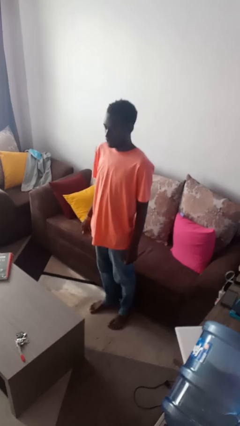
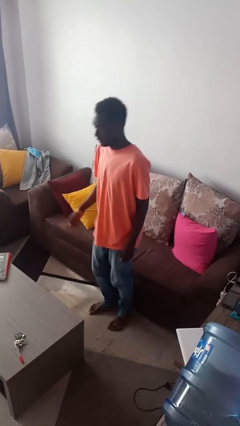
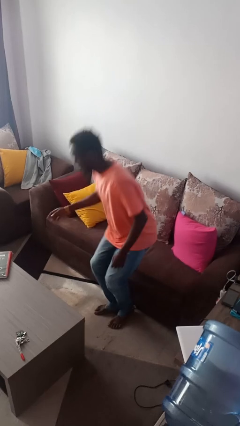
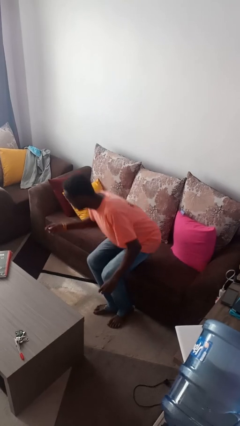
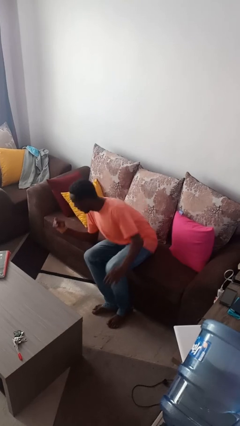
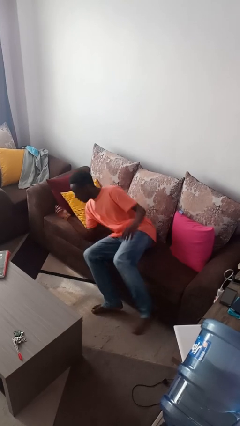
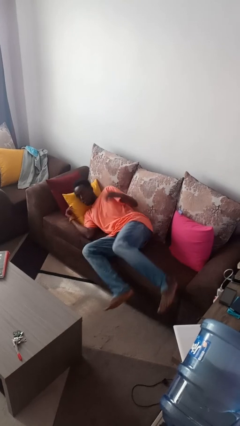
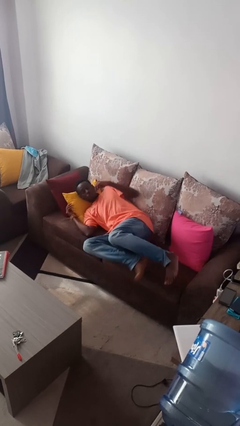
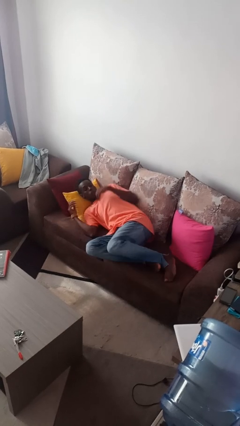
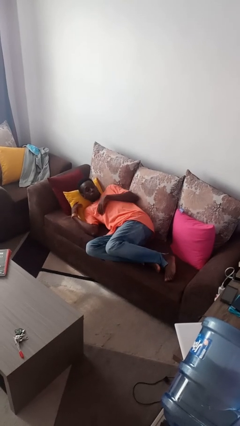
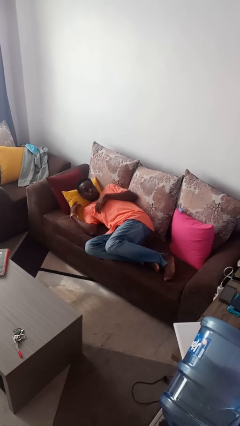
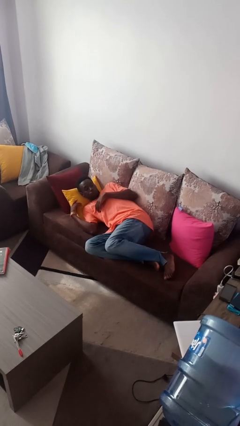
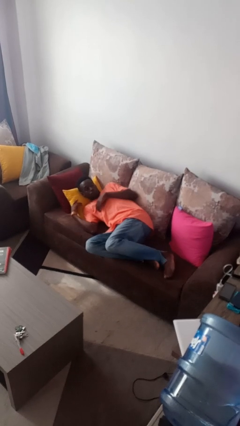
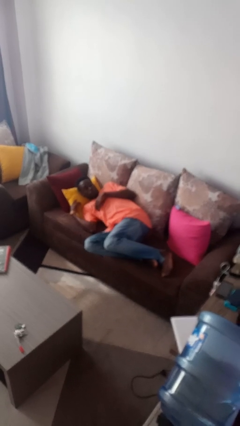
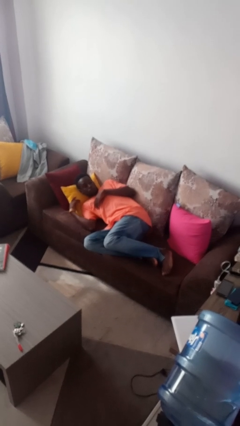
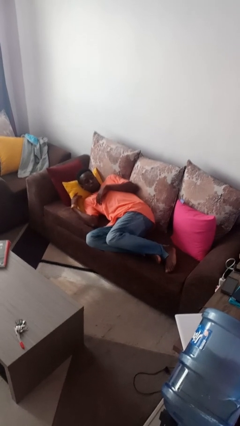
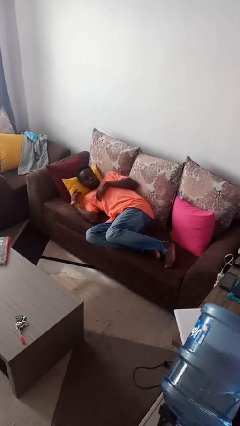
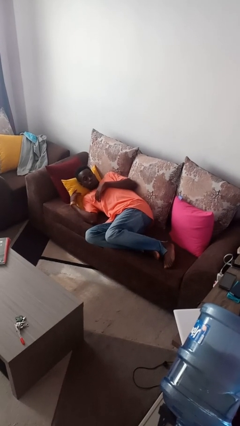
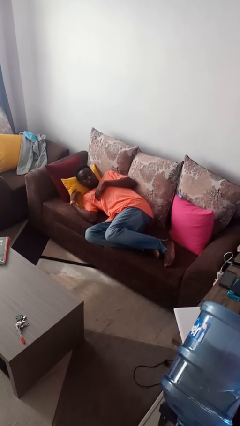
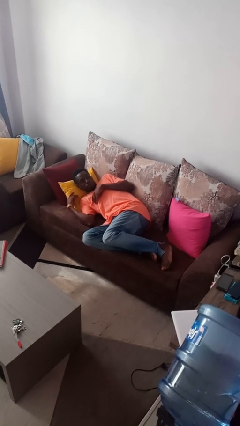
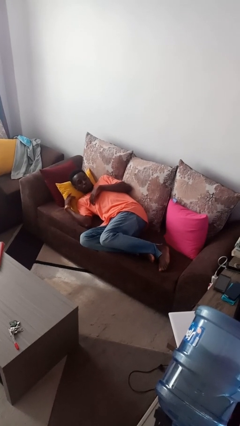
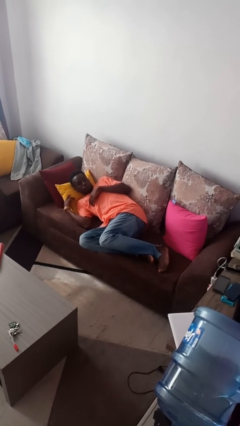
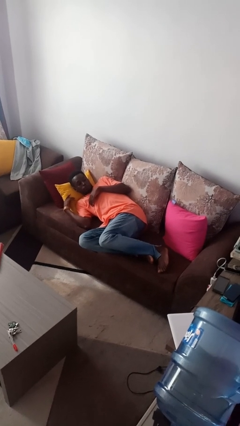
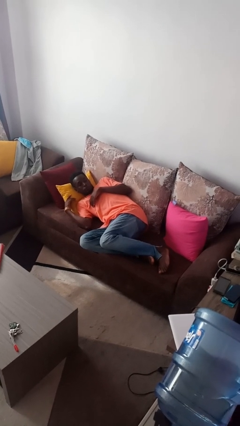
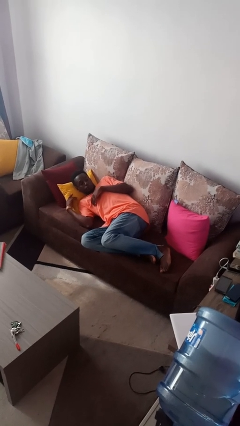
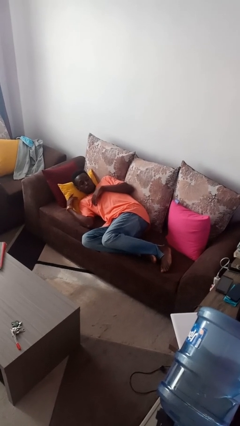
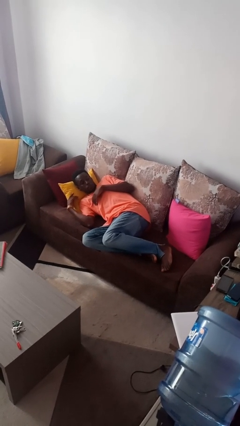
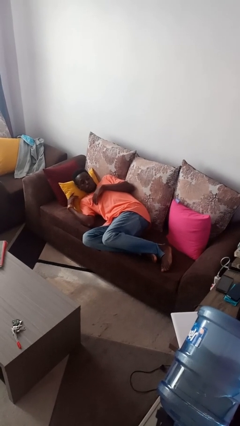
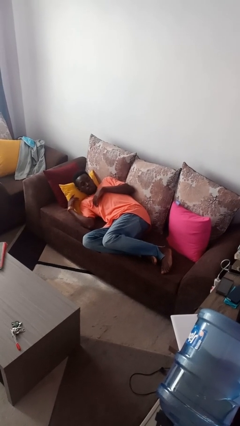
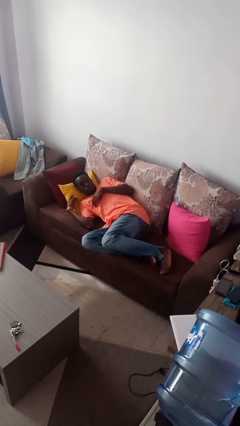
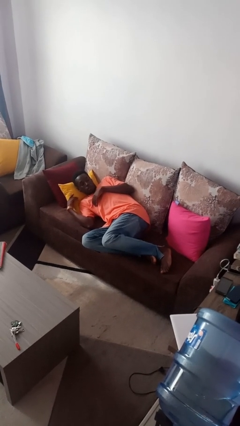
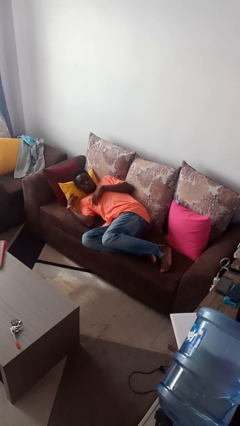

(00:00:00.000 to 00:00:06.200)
person lies down on couch

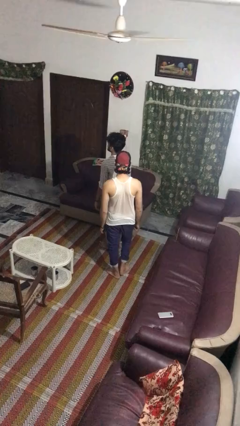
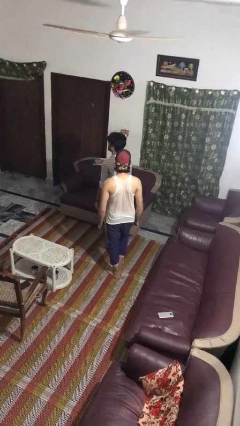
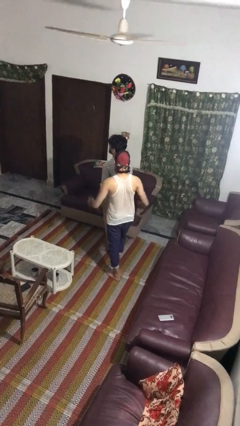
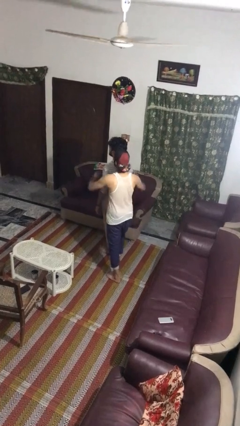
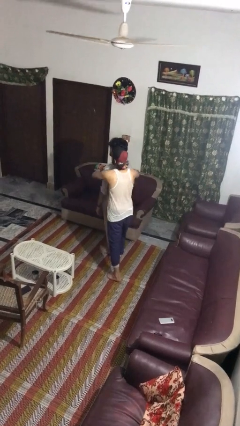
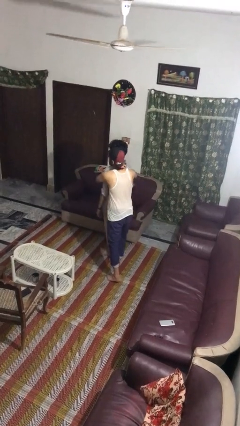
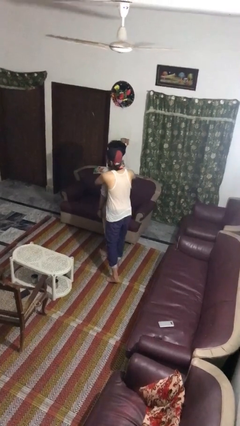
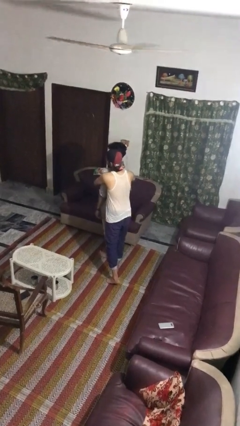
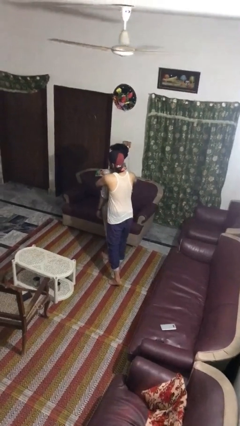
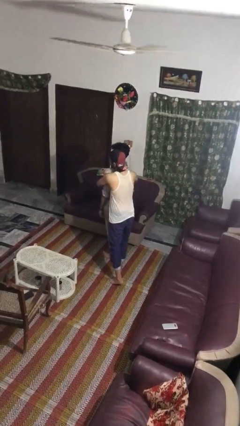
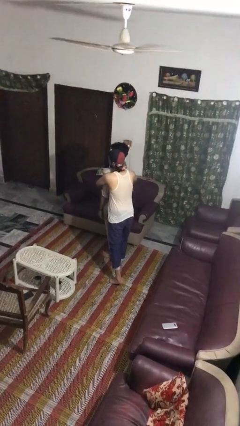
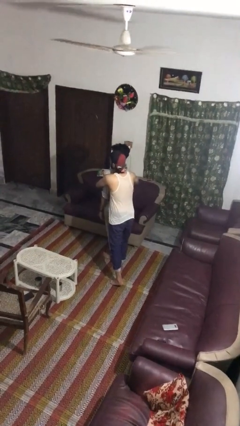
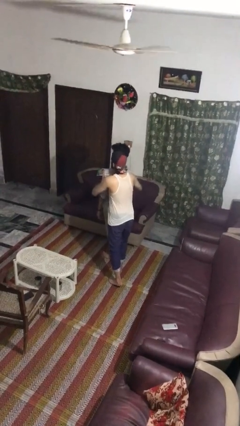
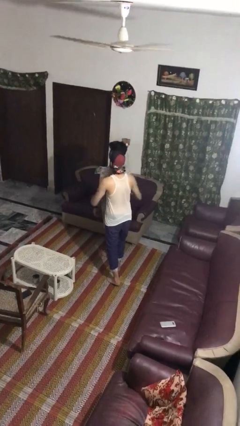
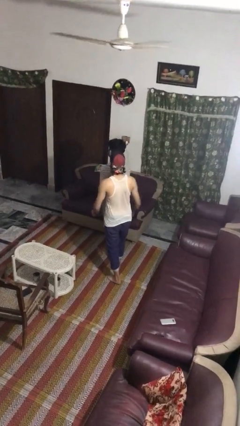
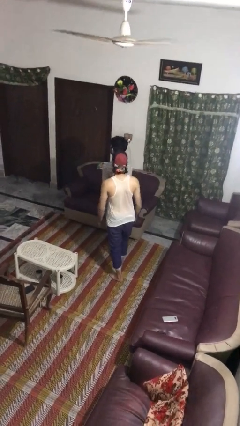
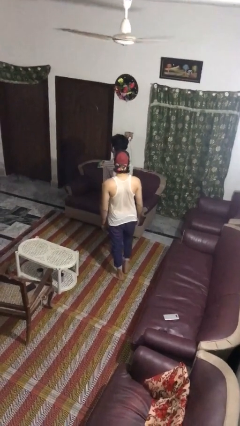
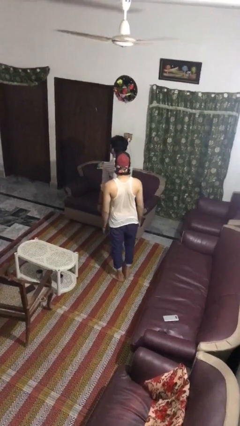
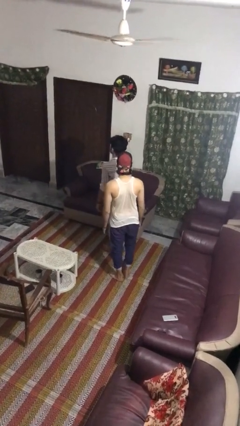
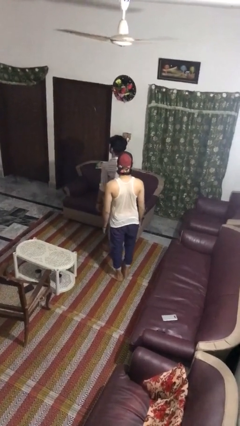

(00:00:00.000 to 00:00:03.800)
person hugs person from behind

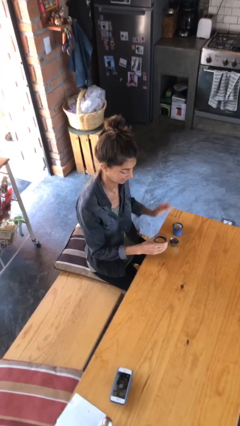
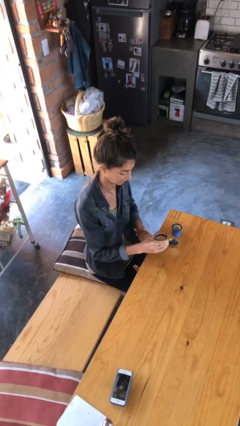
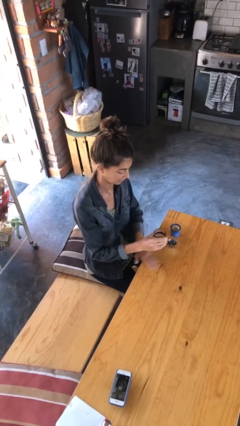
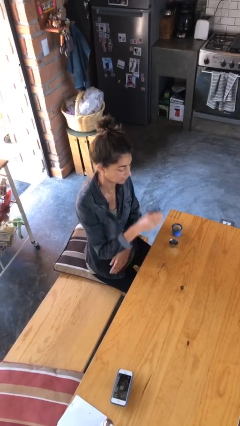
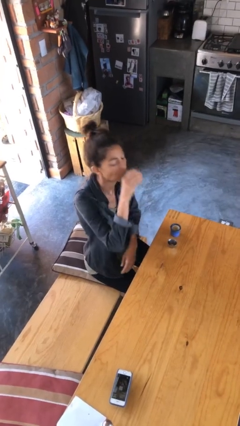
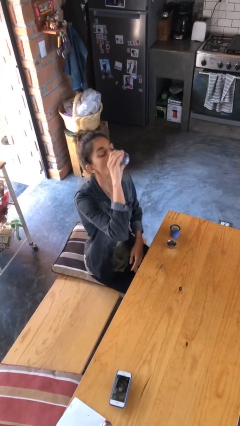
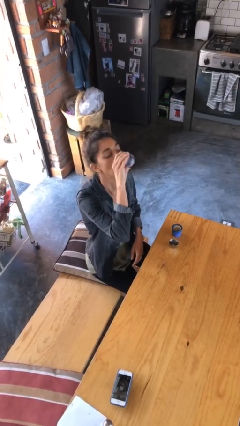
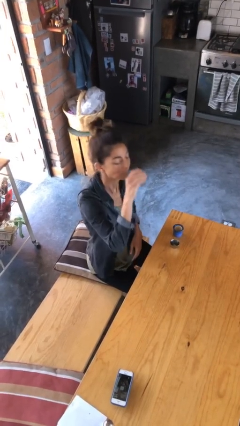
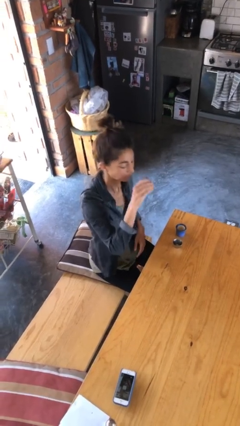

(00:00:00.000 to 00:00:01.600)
person drinks from shotglass

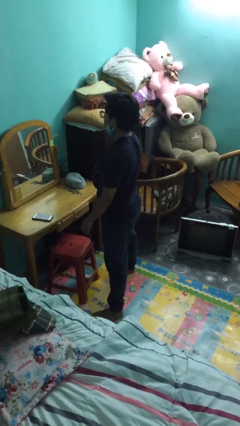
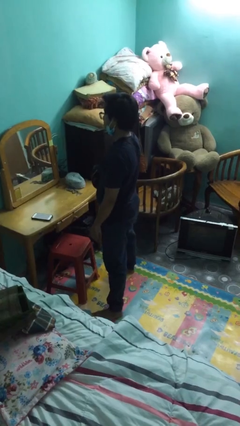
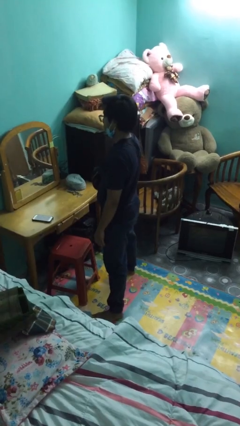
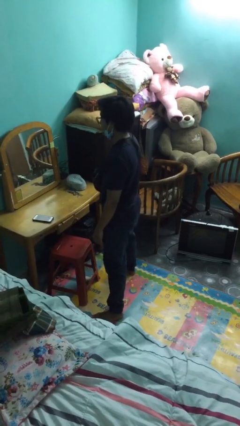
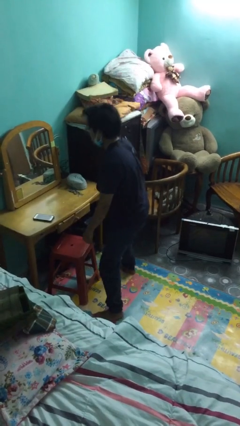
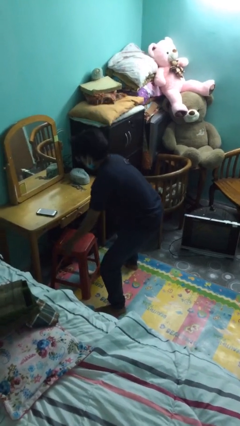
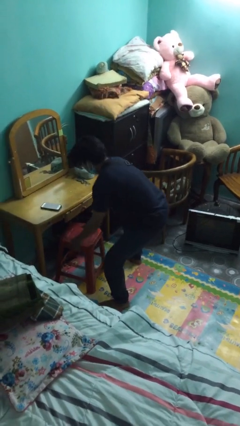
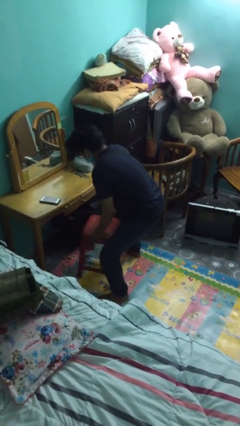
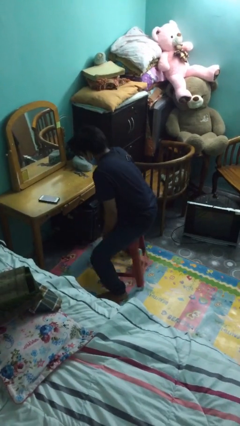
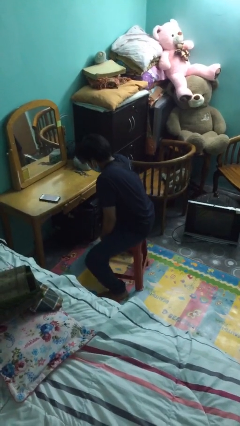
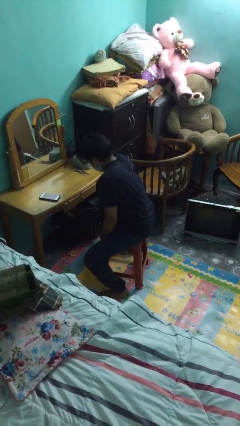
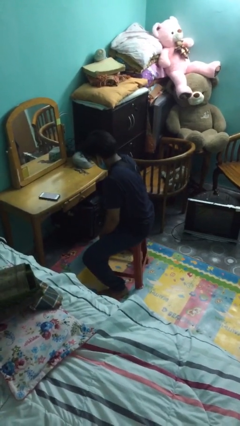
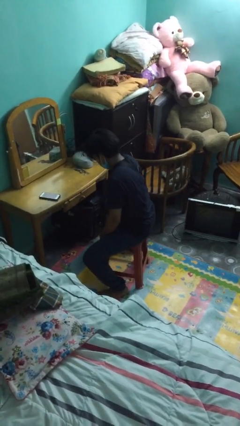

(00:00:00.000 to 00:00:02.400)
person sits down

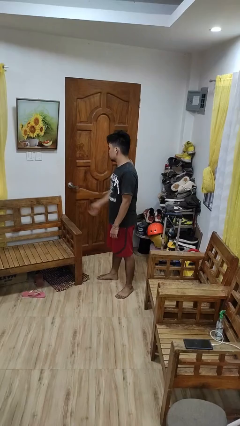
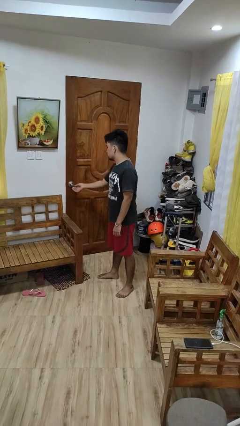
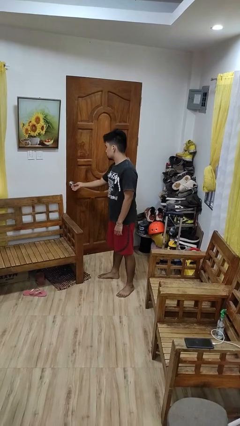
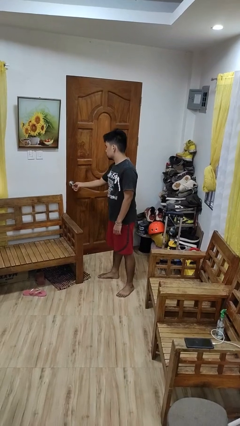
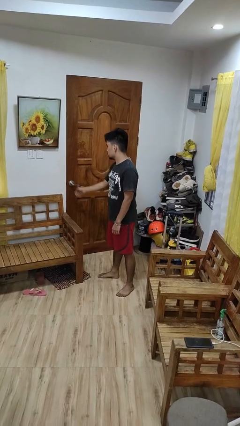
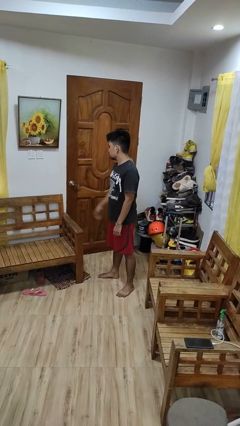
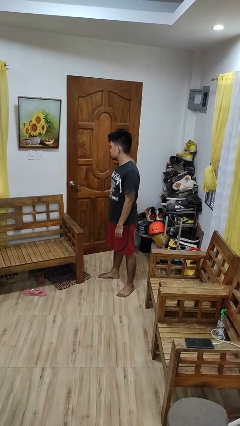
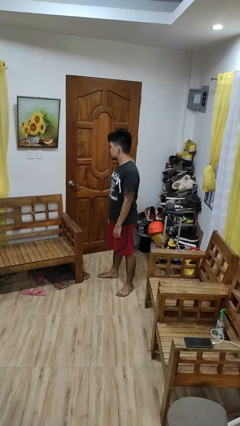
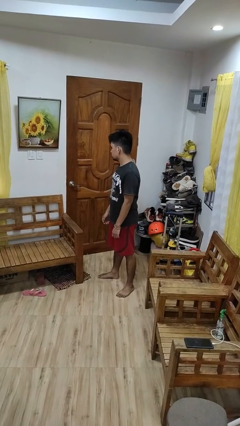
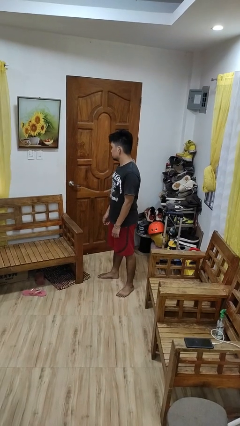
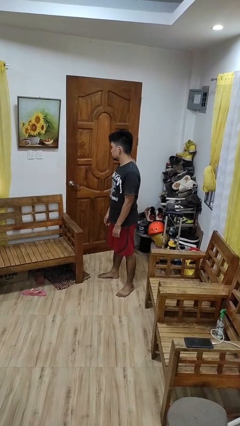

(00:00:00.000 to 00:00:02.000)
person locks door with keys

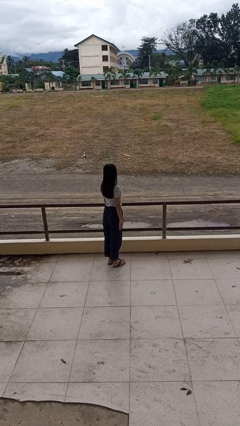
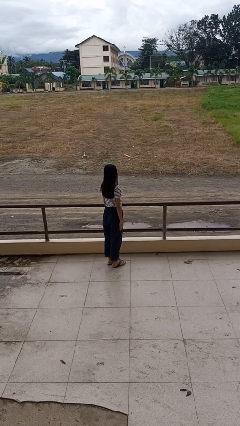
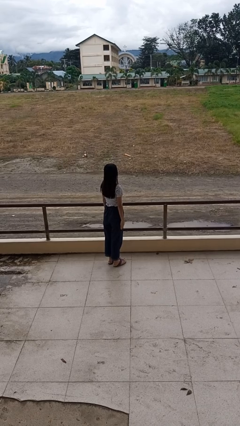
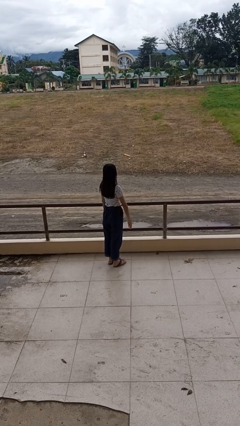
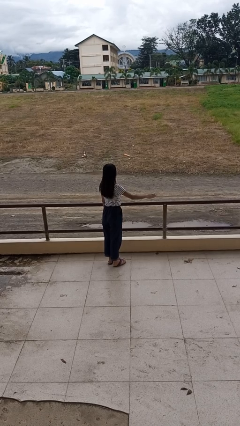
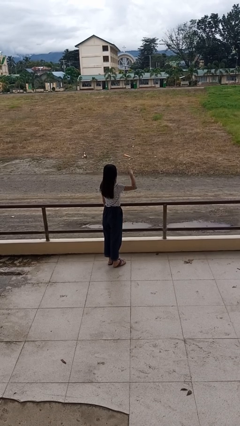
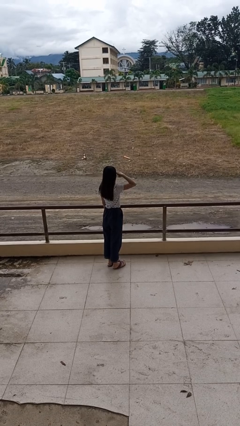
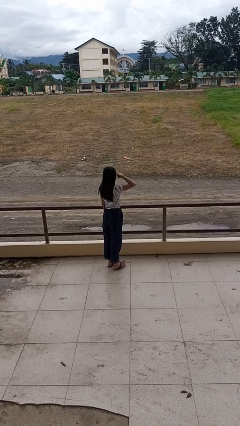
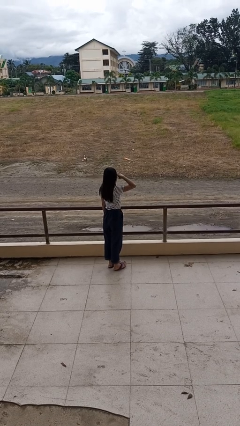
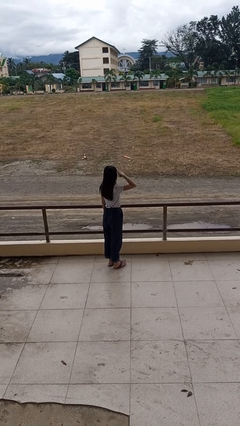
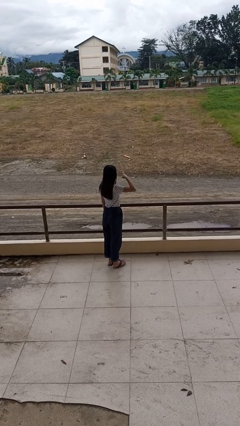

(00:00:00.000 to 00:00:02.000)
person salutes
